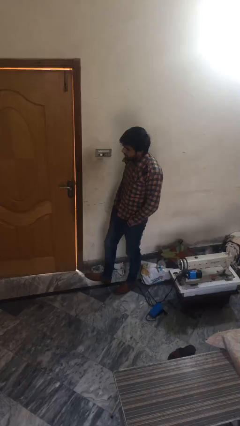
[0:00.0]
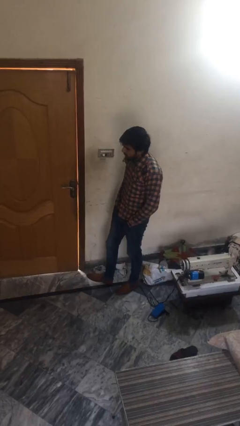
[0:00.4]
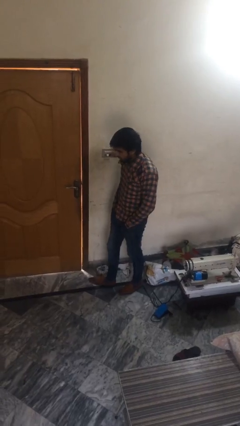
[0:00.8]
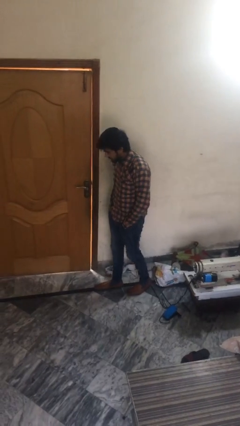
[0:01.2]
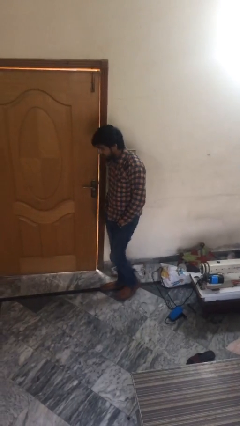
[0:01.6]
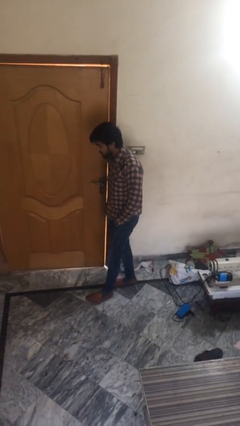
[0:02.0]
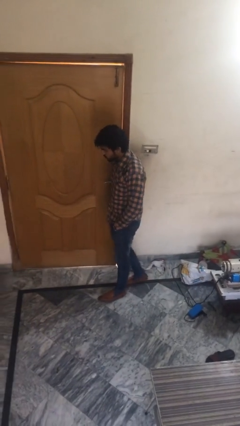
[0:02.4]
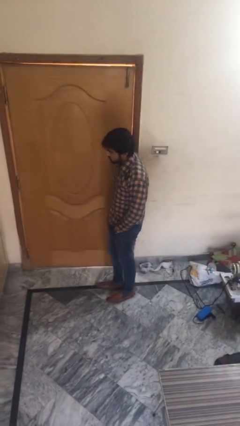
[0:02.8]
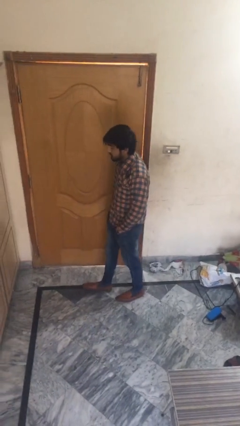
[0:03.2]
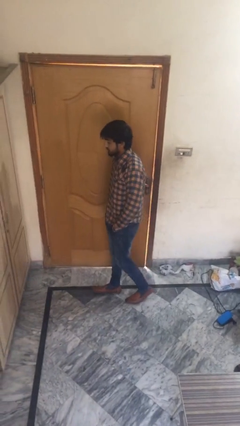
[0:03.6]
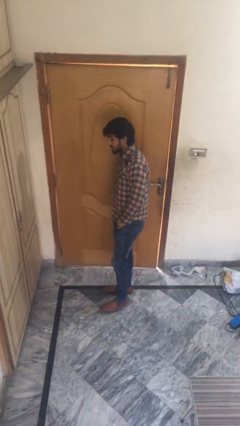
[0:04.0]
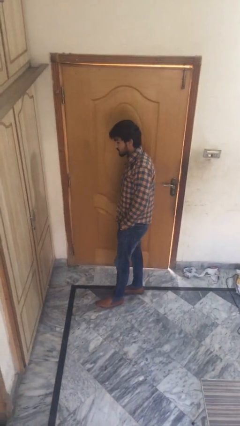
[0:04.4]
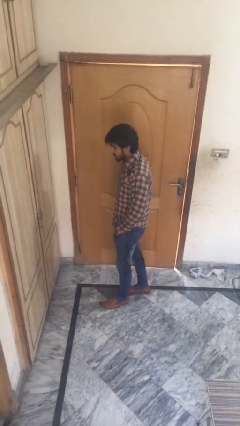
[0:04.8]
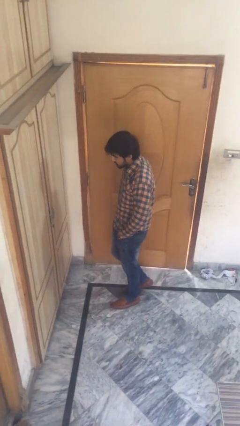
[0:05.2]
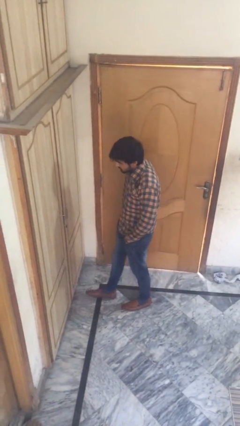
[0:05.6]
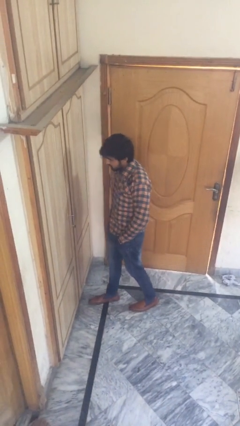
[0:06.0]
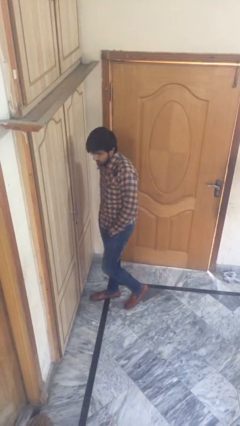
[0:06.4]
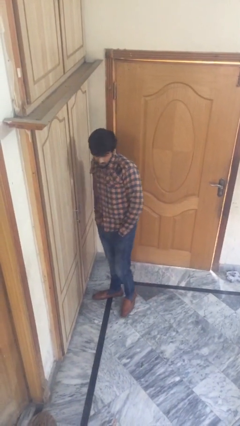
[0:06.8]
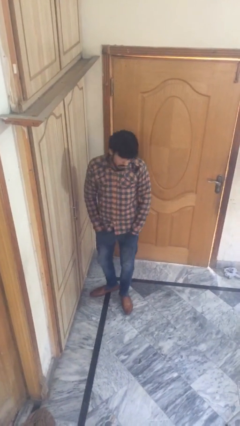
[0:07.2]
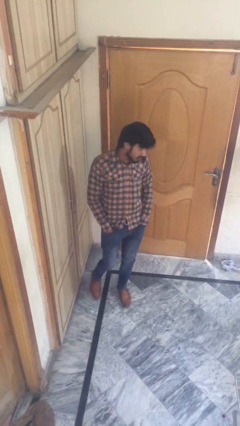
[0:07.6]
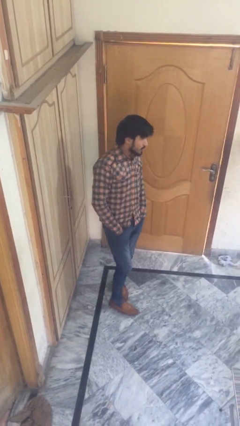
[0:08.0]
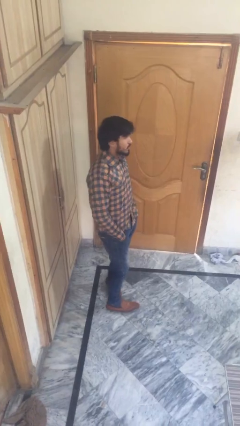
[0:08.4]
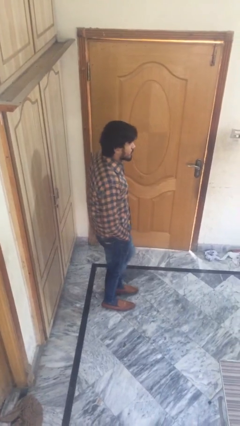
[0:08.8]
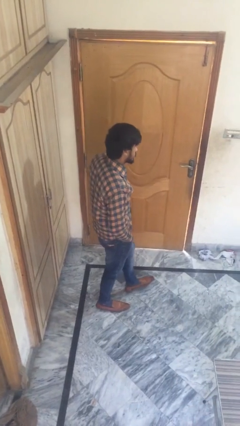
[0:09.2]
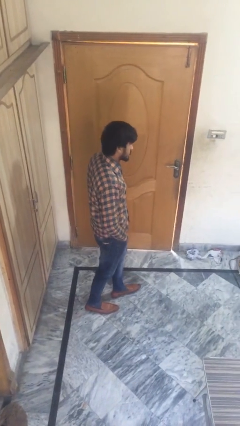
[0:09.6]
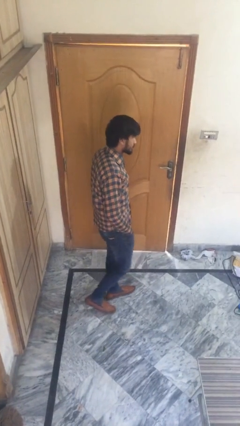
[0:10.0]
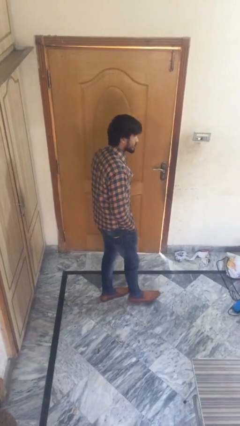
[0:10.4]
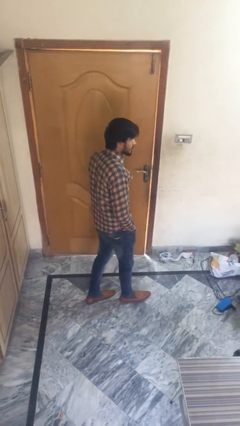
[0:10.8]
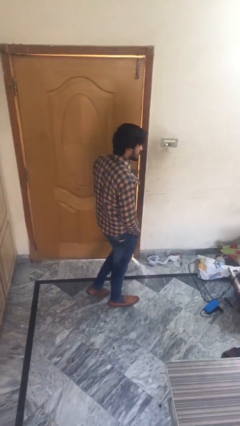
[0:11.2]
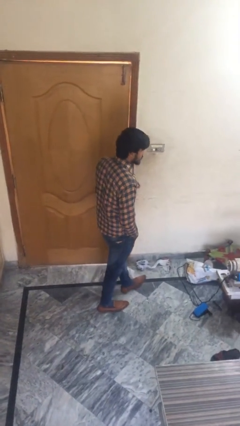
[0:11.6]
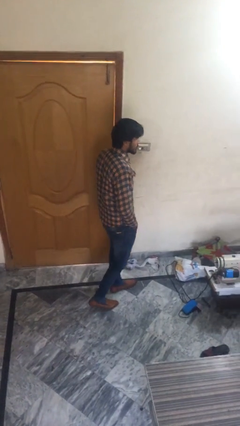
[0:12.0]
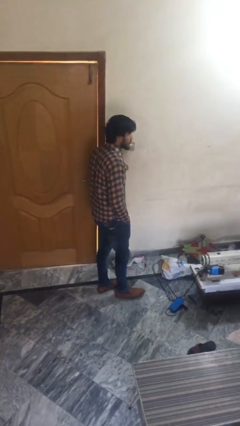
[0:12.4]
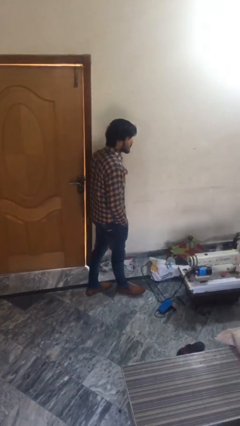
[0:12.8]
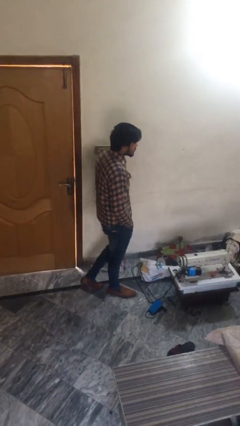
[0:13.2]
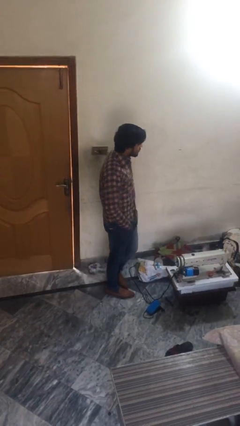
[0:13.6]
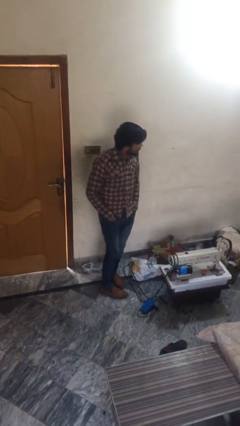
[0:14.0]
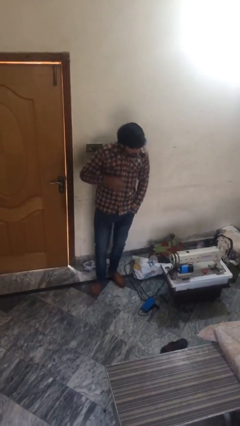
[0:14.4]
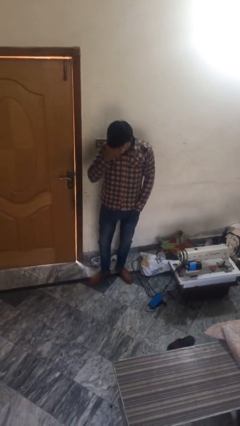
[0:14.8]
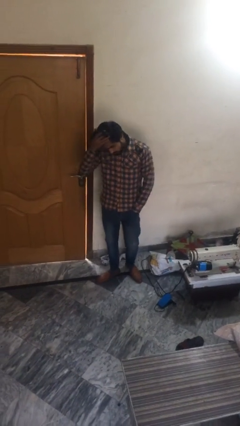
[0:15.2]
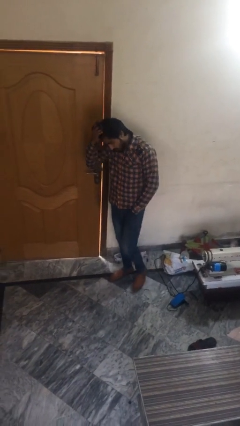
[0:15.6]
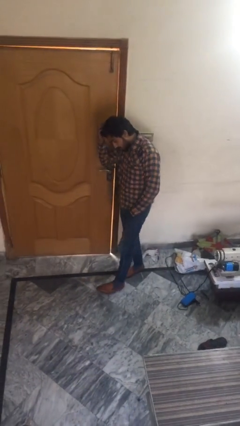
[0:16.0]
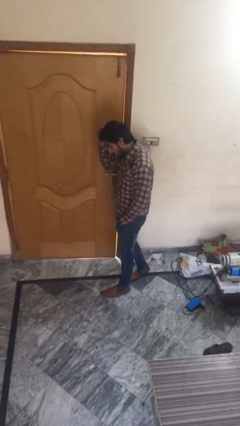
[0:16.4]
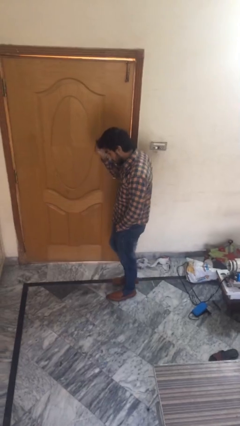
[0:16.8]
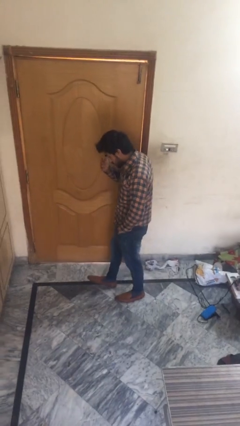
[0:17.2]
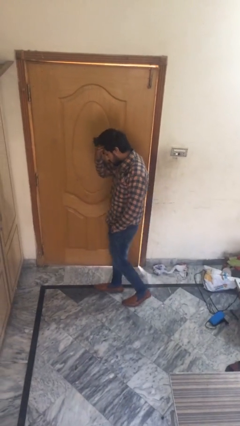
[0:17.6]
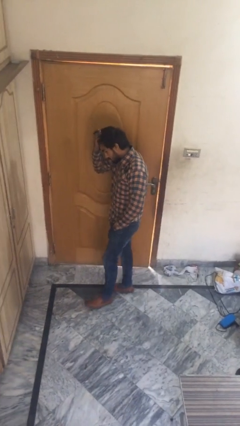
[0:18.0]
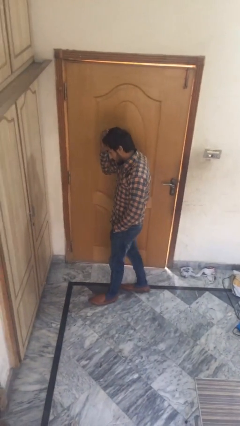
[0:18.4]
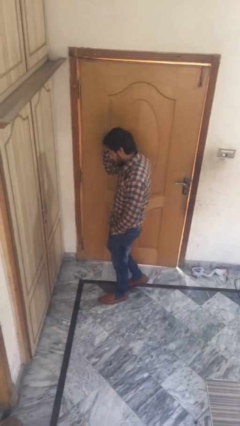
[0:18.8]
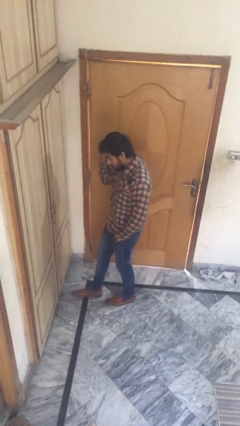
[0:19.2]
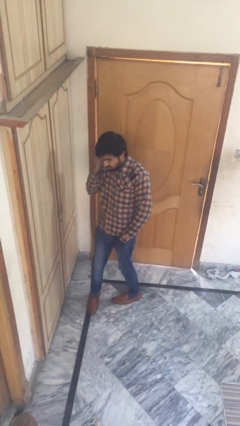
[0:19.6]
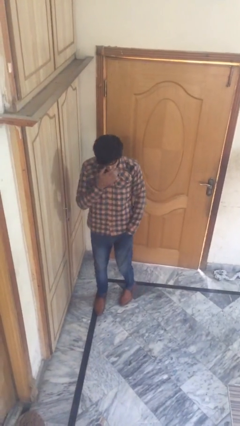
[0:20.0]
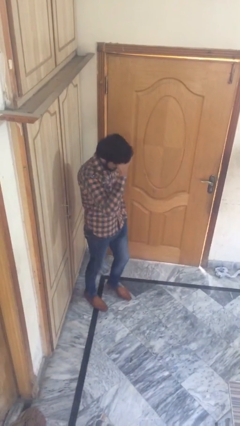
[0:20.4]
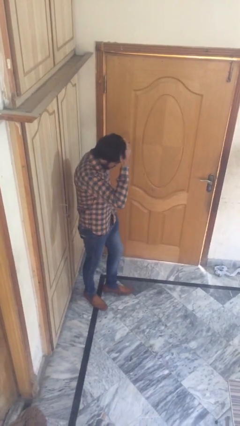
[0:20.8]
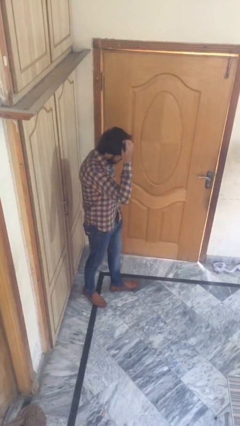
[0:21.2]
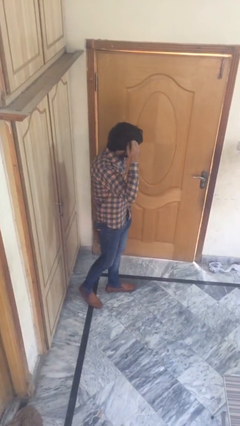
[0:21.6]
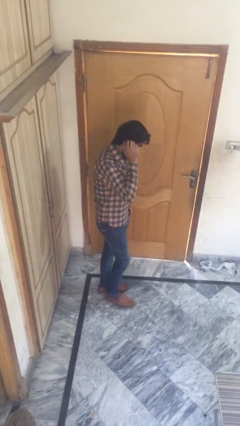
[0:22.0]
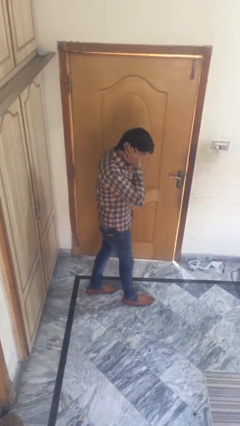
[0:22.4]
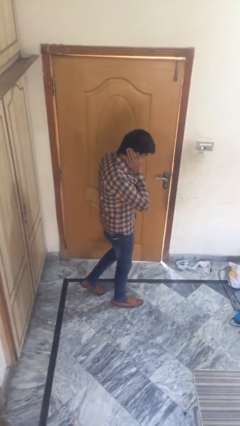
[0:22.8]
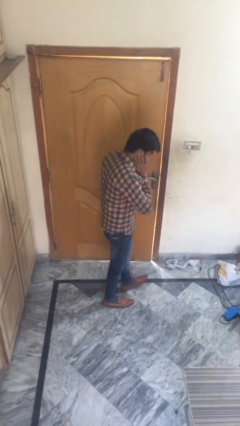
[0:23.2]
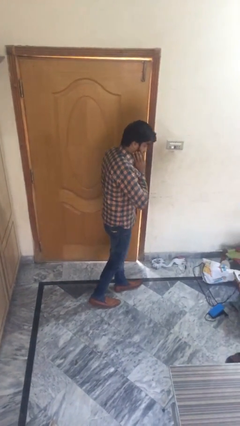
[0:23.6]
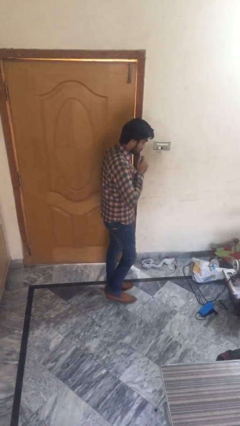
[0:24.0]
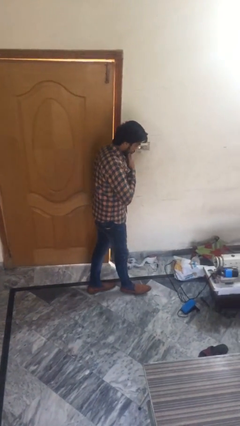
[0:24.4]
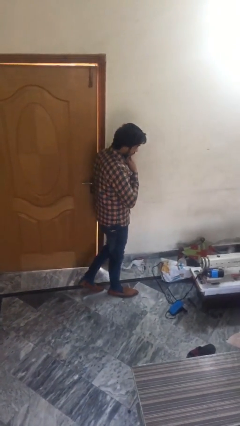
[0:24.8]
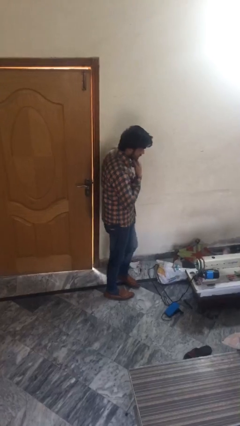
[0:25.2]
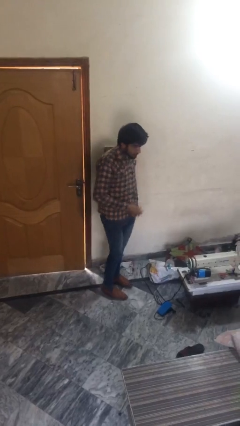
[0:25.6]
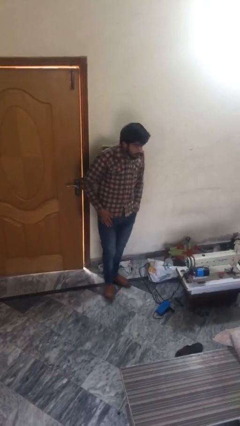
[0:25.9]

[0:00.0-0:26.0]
person walks

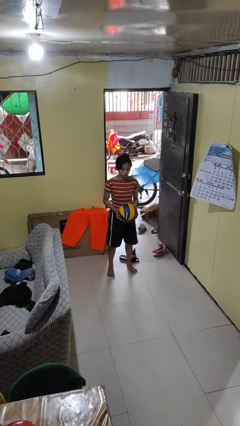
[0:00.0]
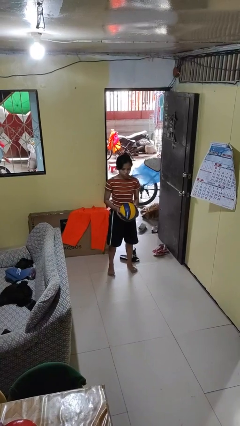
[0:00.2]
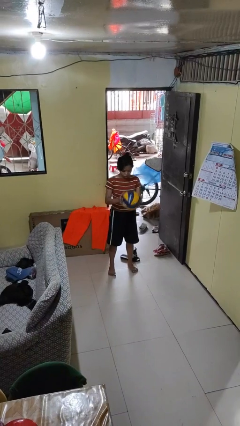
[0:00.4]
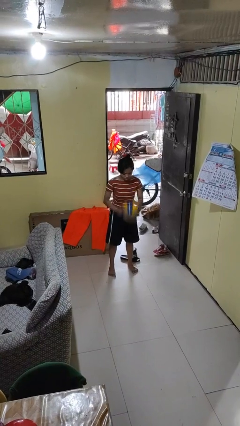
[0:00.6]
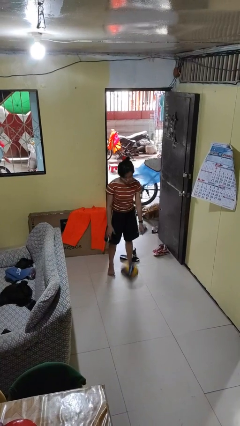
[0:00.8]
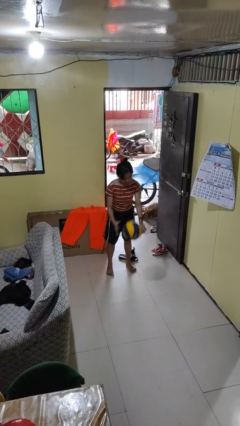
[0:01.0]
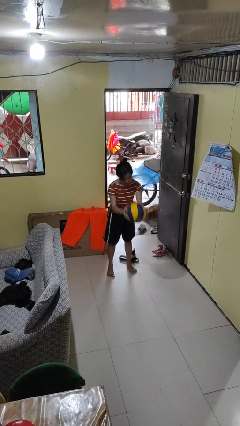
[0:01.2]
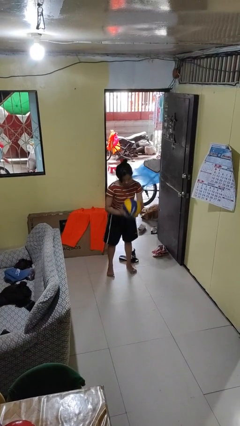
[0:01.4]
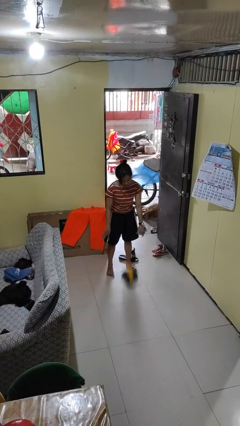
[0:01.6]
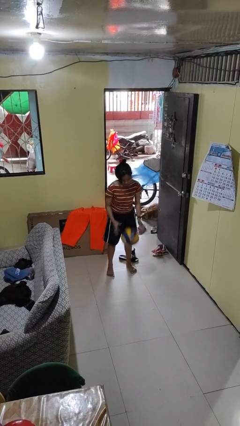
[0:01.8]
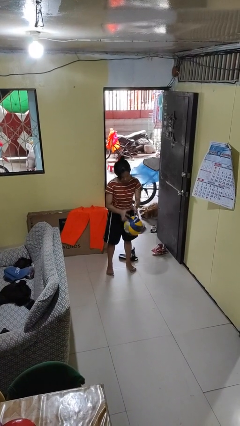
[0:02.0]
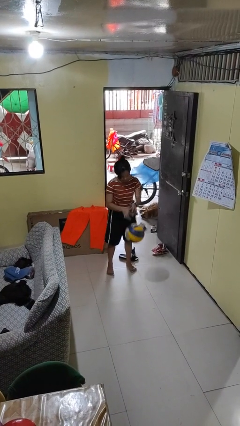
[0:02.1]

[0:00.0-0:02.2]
person bounces ball on floor

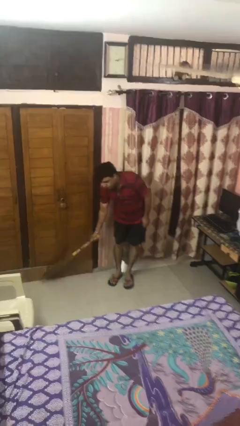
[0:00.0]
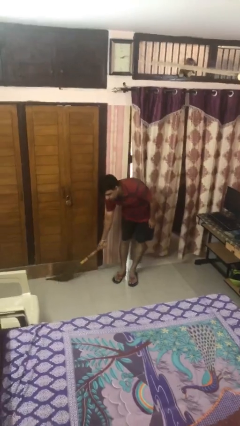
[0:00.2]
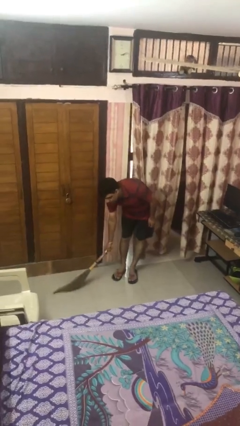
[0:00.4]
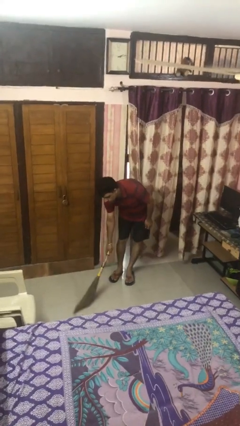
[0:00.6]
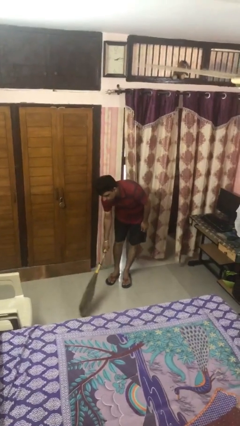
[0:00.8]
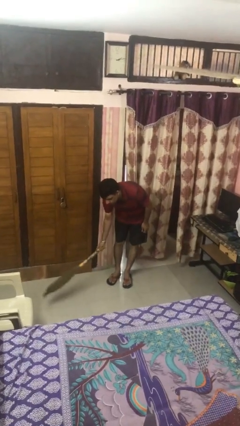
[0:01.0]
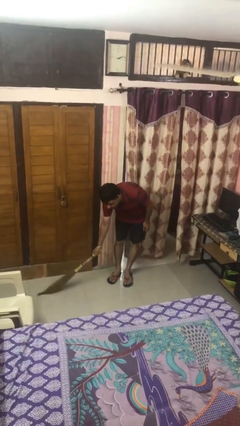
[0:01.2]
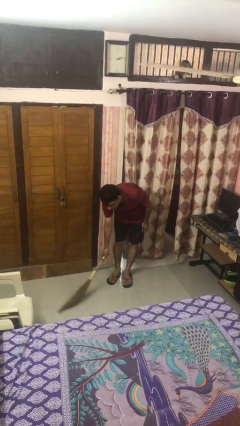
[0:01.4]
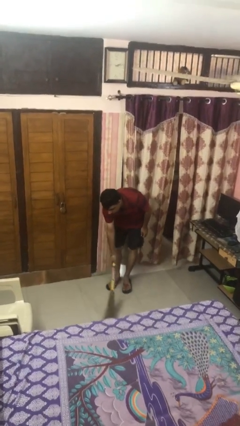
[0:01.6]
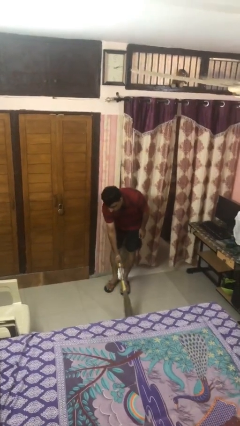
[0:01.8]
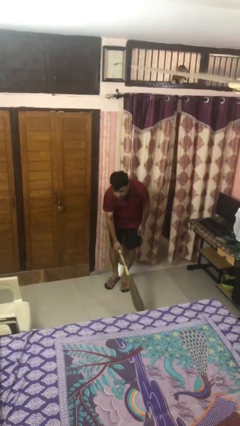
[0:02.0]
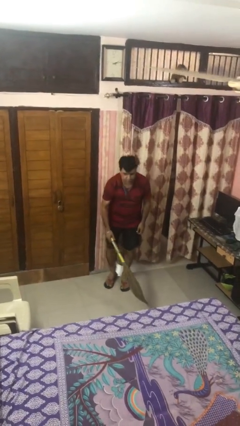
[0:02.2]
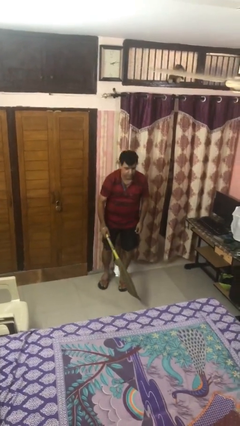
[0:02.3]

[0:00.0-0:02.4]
person sweeps floor

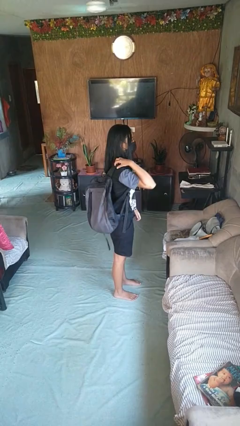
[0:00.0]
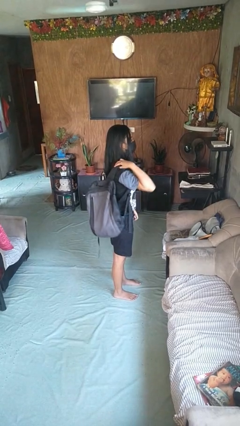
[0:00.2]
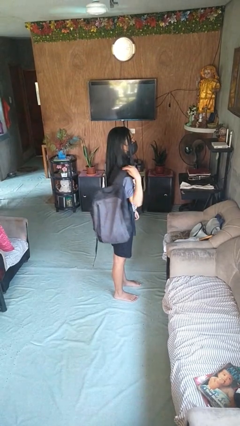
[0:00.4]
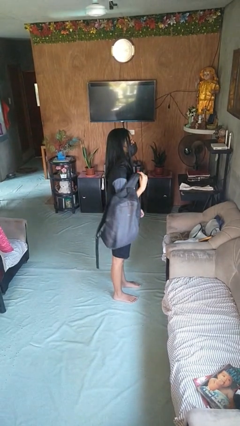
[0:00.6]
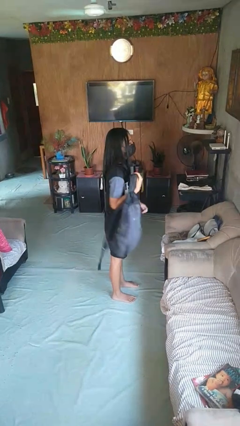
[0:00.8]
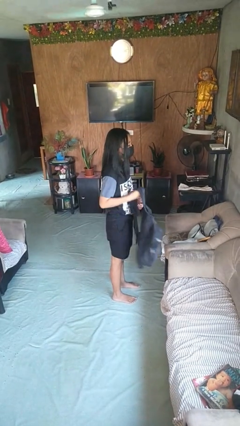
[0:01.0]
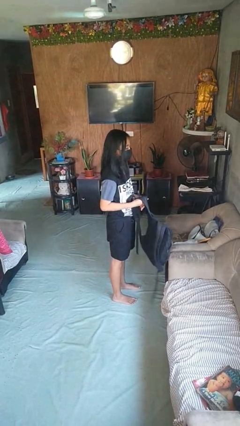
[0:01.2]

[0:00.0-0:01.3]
person takes off backpack
